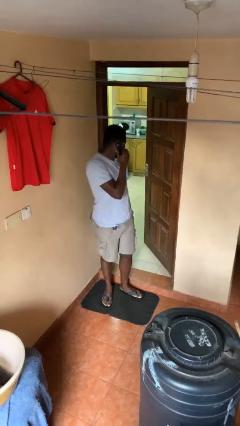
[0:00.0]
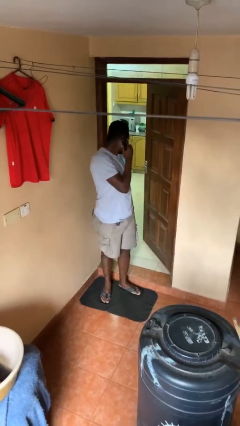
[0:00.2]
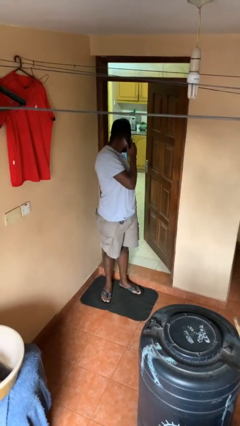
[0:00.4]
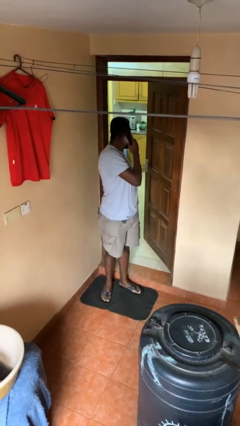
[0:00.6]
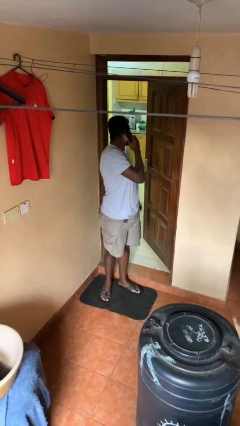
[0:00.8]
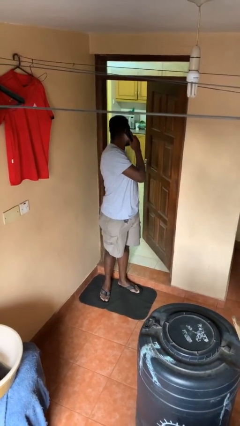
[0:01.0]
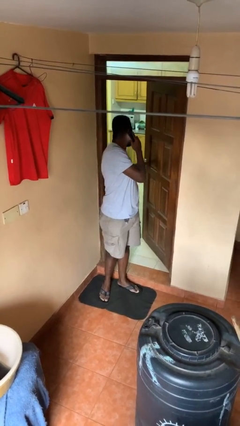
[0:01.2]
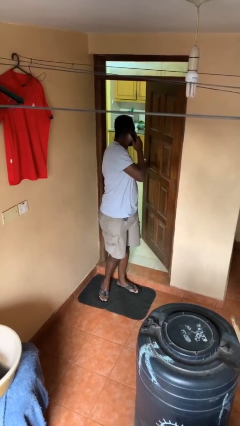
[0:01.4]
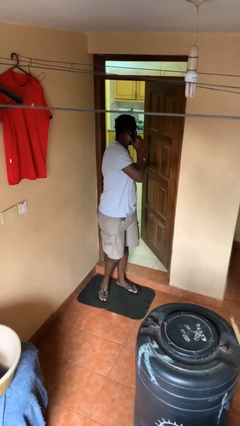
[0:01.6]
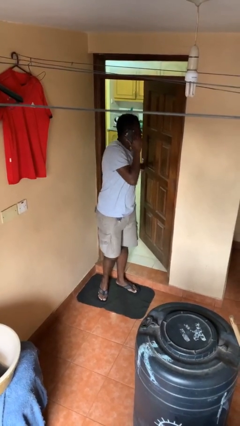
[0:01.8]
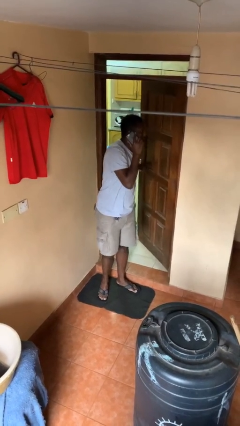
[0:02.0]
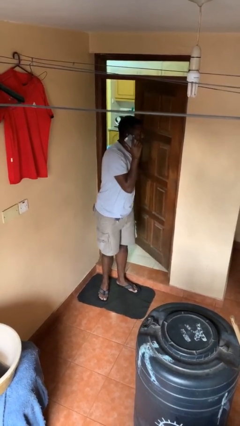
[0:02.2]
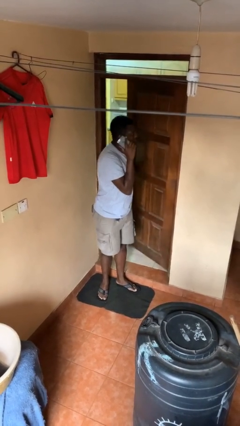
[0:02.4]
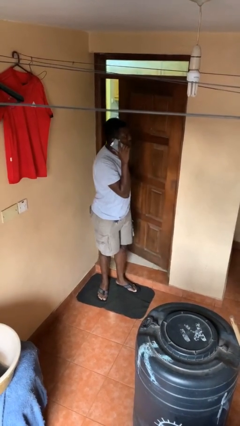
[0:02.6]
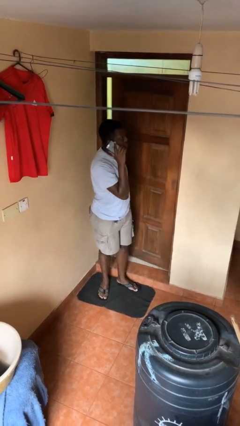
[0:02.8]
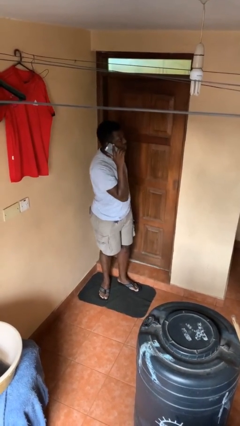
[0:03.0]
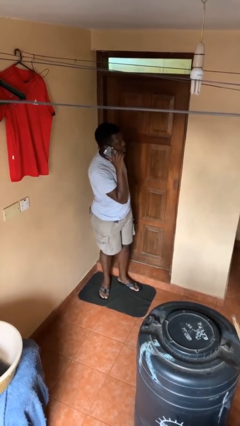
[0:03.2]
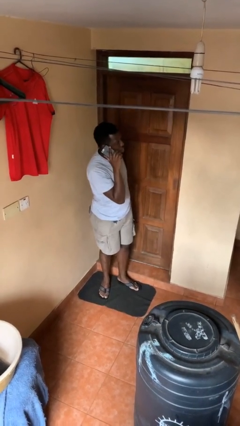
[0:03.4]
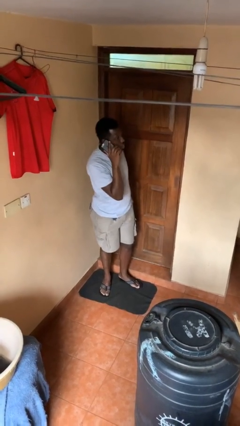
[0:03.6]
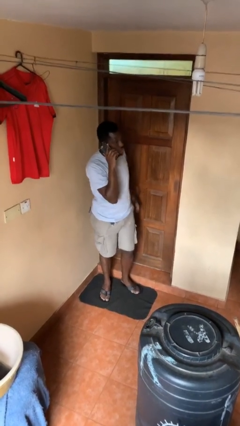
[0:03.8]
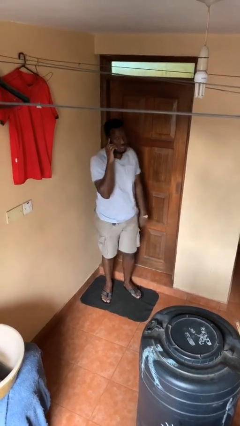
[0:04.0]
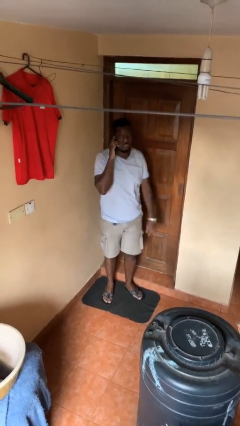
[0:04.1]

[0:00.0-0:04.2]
person closes facility door

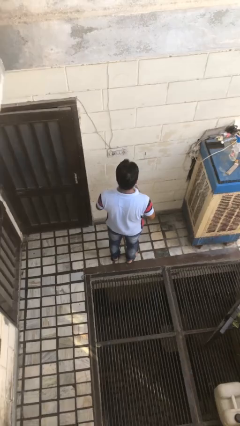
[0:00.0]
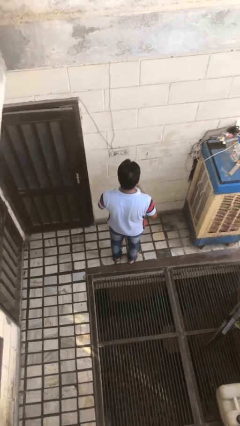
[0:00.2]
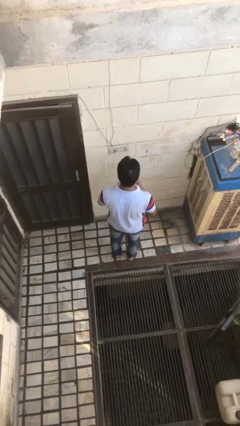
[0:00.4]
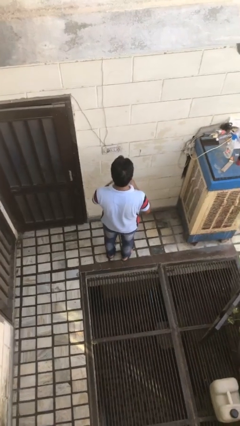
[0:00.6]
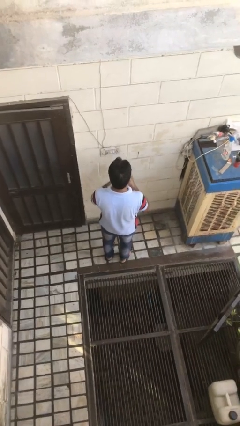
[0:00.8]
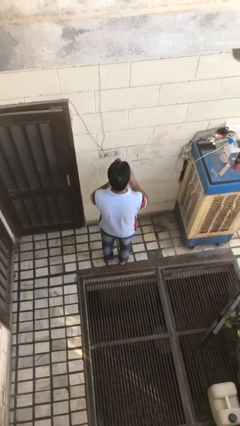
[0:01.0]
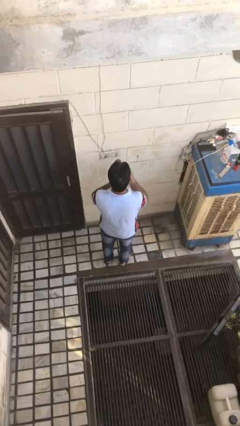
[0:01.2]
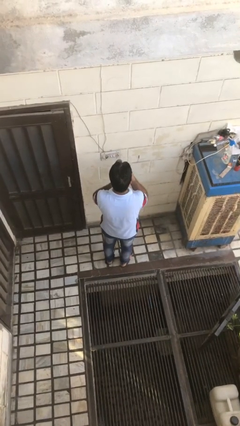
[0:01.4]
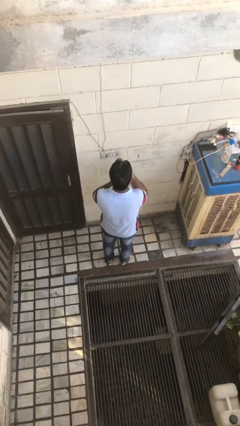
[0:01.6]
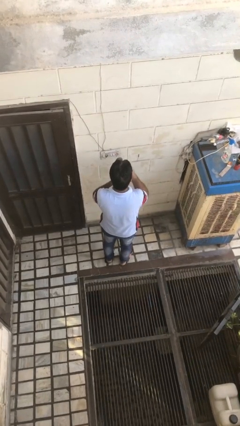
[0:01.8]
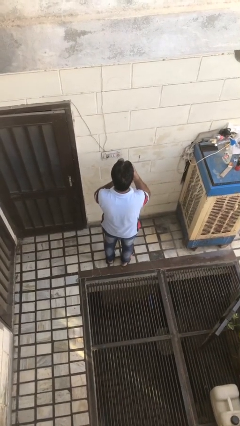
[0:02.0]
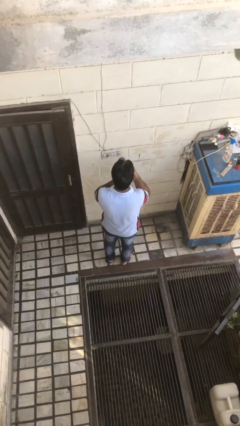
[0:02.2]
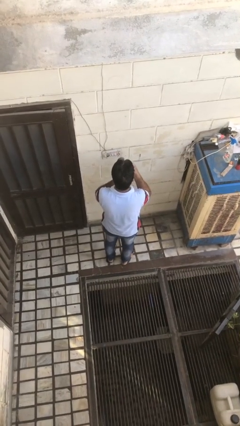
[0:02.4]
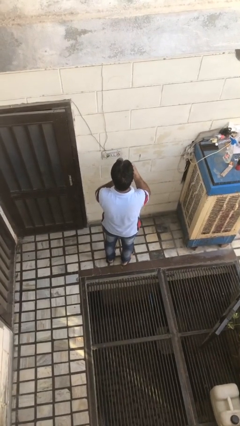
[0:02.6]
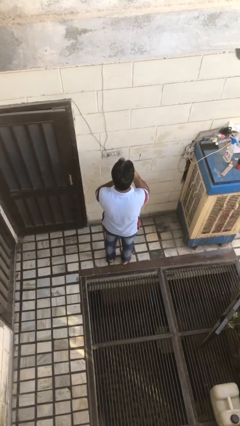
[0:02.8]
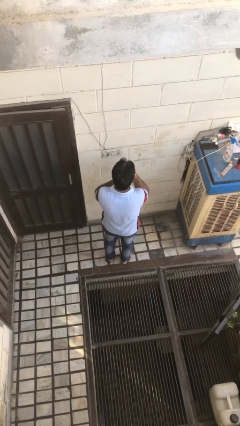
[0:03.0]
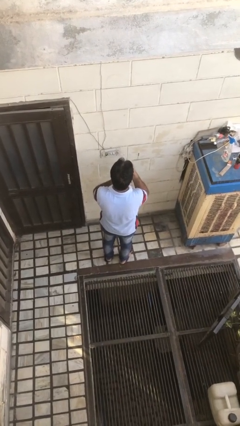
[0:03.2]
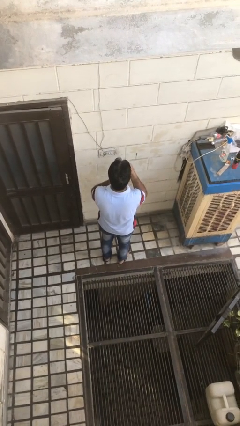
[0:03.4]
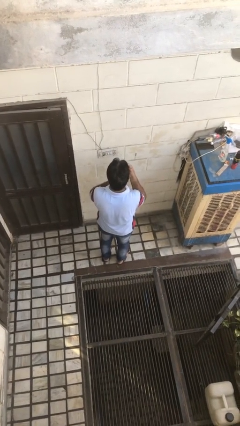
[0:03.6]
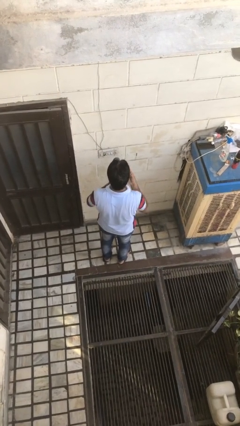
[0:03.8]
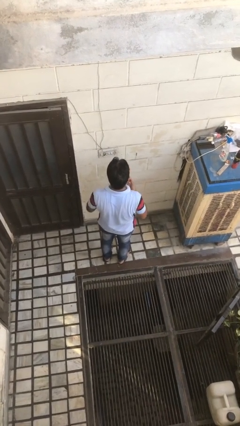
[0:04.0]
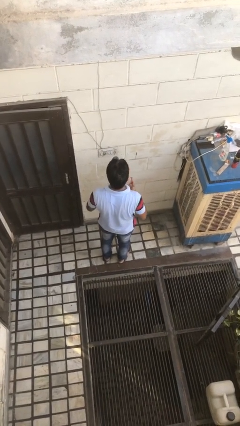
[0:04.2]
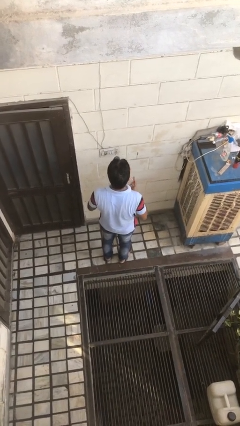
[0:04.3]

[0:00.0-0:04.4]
person applies lip makeup

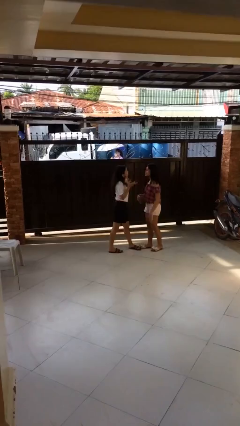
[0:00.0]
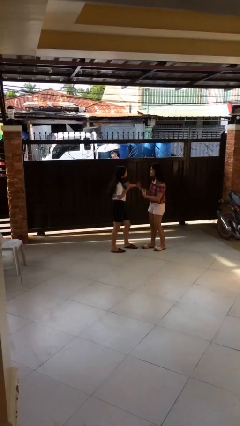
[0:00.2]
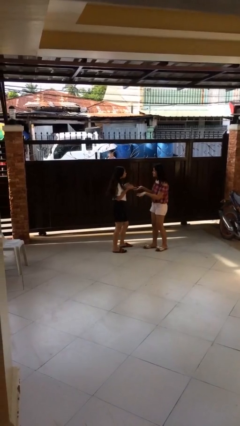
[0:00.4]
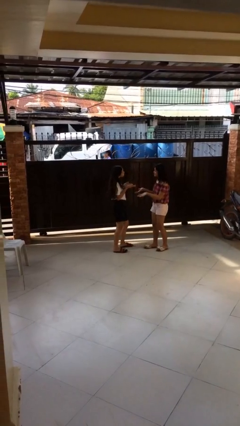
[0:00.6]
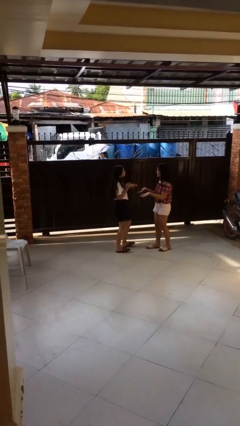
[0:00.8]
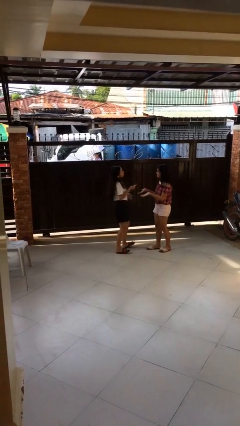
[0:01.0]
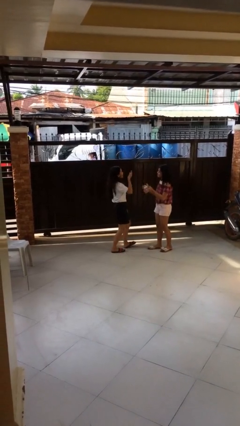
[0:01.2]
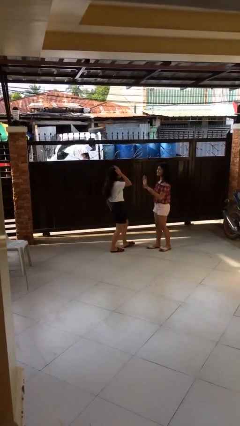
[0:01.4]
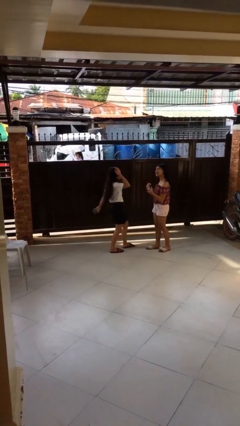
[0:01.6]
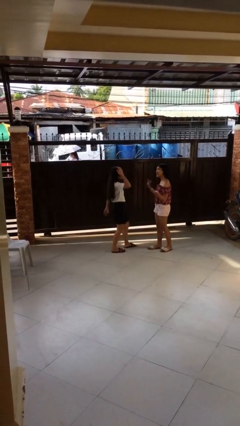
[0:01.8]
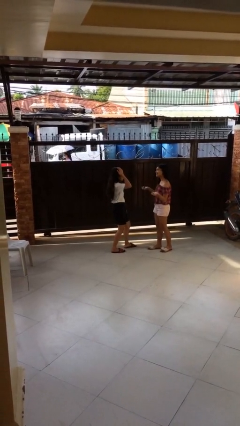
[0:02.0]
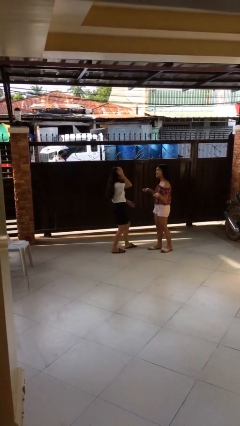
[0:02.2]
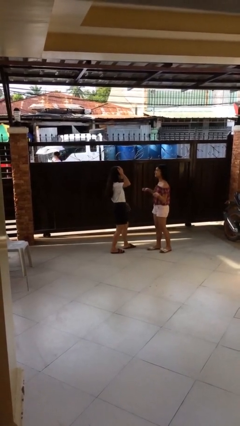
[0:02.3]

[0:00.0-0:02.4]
person talks to person

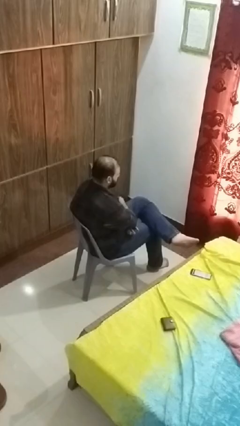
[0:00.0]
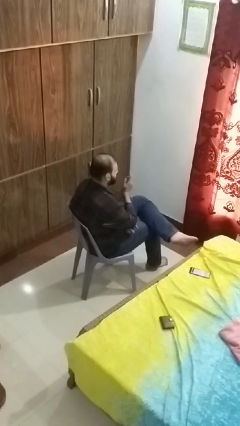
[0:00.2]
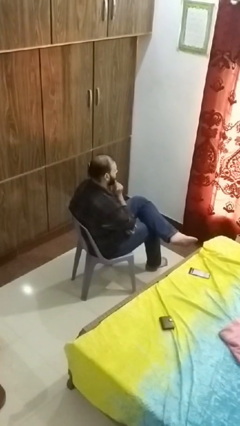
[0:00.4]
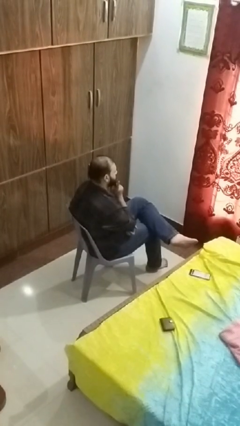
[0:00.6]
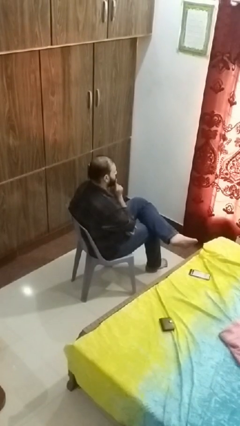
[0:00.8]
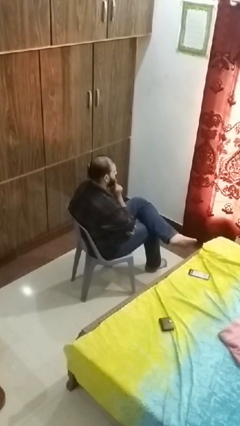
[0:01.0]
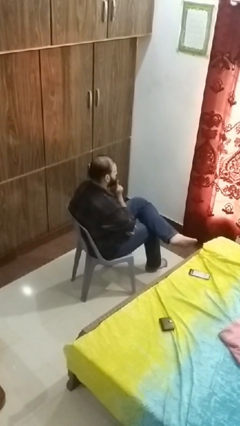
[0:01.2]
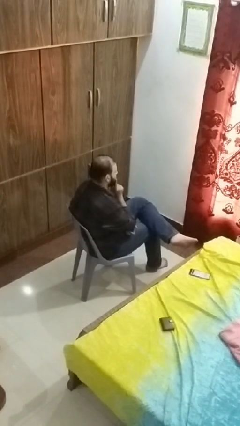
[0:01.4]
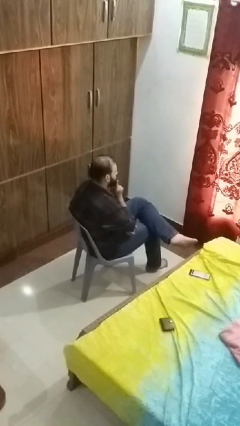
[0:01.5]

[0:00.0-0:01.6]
person strokes chin

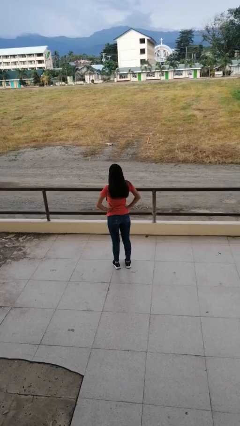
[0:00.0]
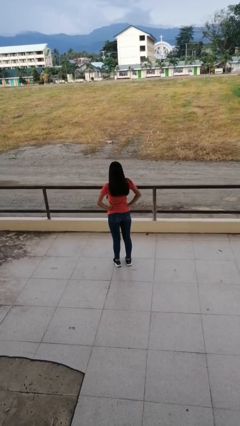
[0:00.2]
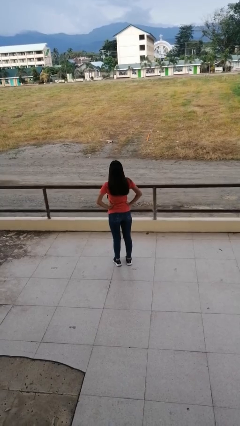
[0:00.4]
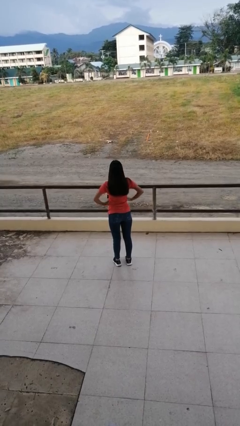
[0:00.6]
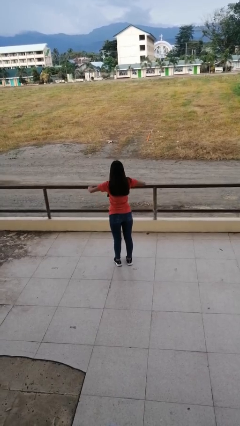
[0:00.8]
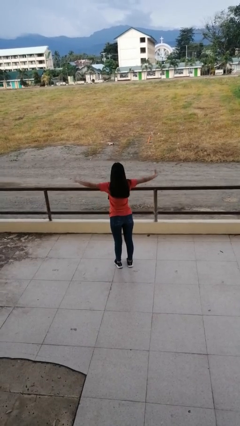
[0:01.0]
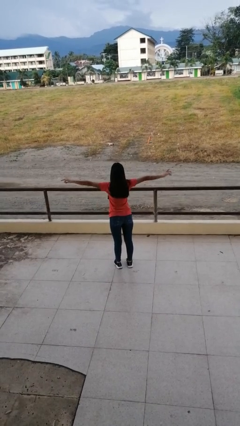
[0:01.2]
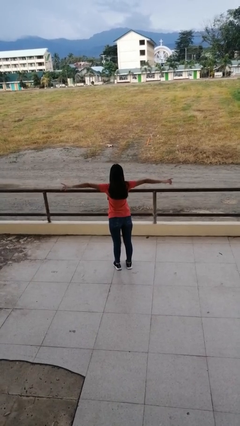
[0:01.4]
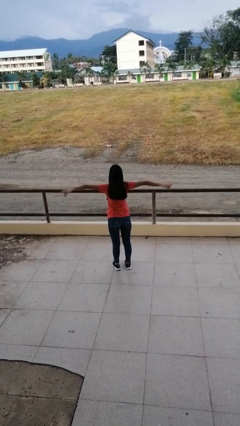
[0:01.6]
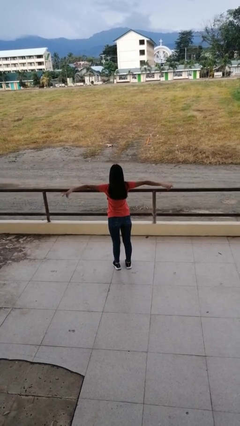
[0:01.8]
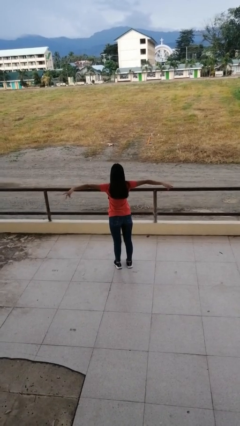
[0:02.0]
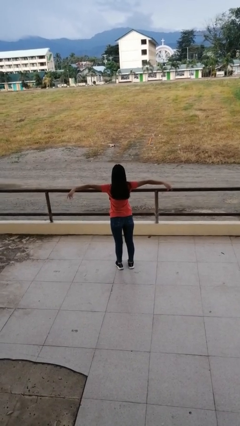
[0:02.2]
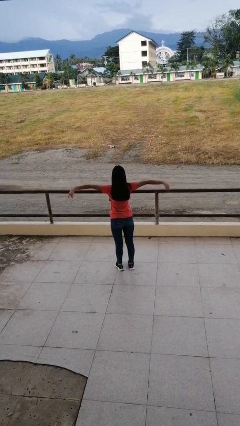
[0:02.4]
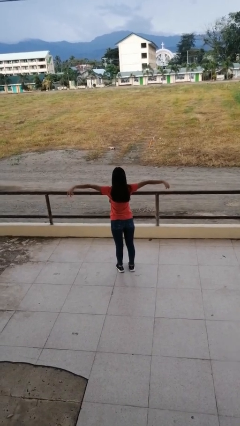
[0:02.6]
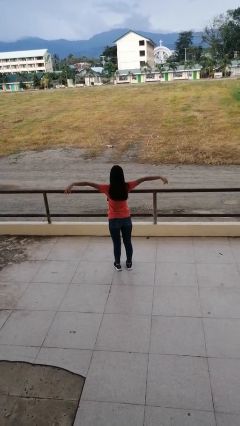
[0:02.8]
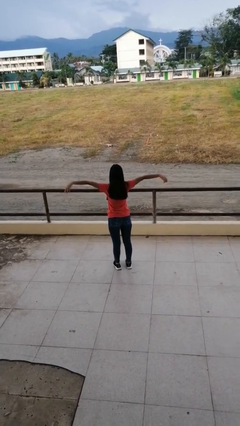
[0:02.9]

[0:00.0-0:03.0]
person stretches arms to side

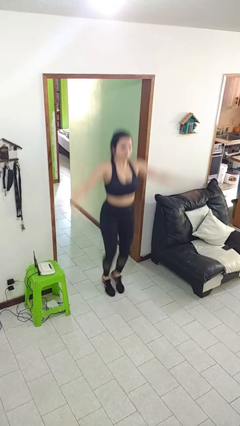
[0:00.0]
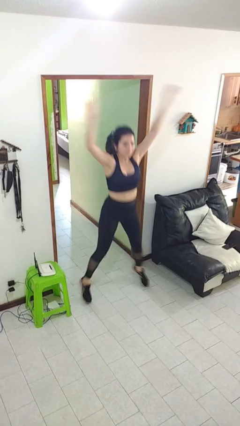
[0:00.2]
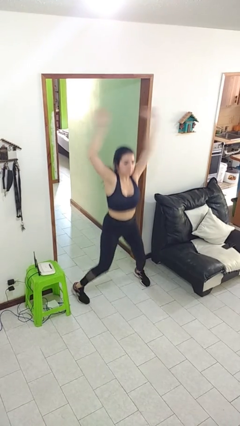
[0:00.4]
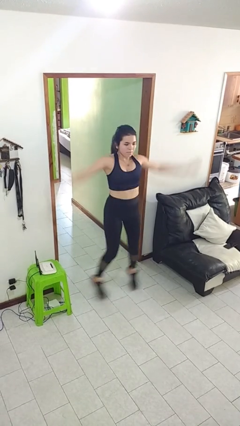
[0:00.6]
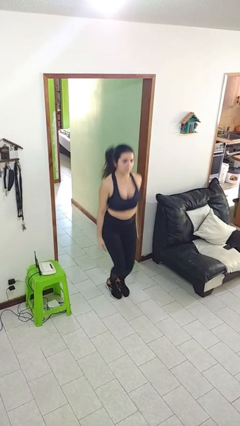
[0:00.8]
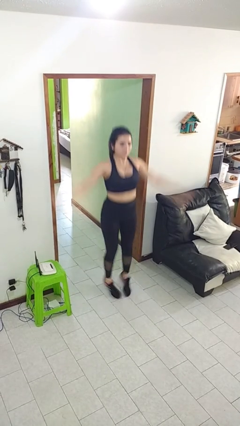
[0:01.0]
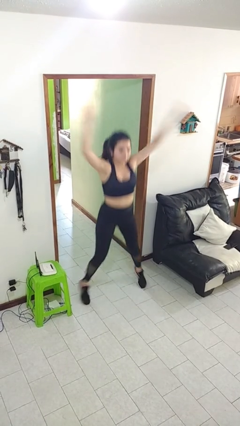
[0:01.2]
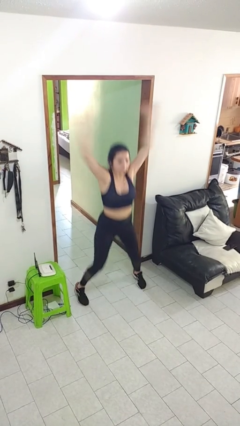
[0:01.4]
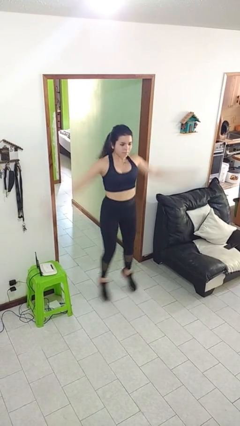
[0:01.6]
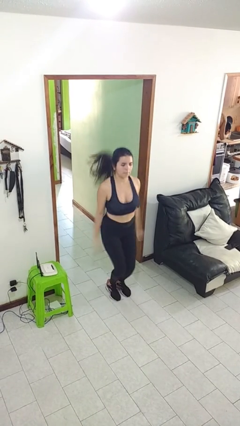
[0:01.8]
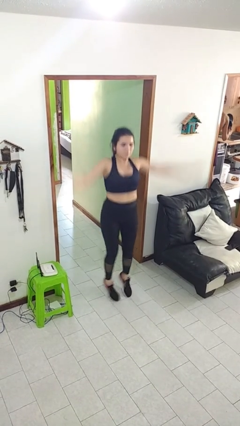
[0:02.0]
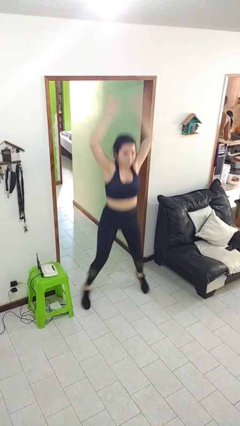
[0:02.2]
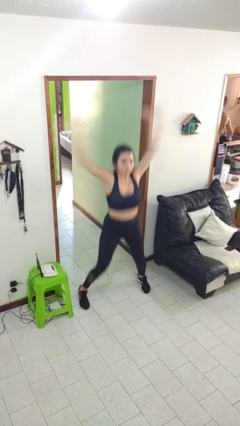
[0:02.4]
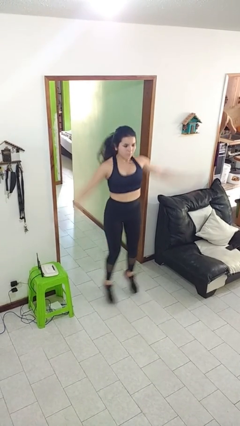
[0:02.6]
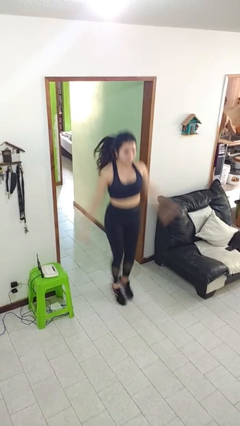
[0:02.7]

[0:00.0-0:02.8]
person exercises with jumping jacks
